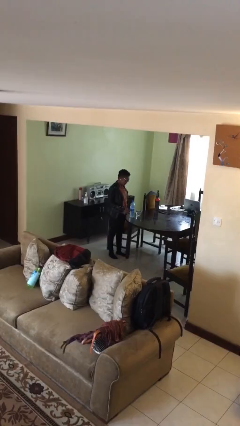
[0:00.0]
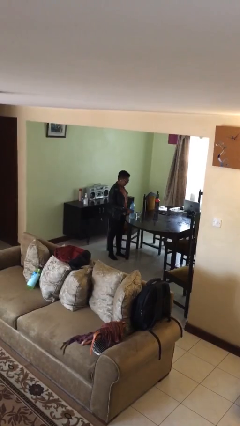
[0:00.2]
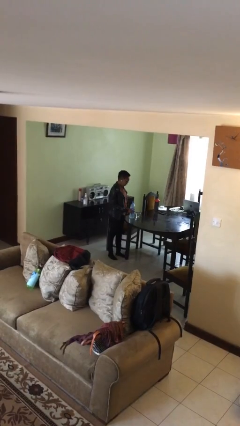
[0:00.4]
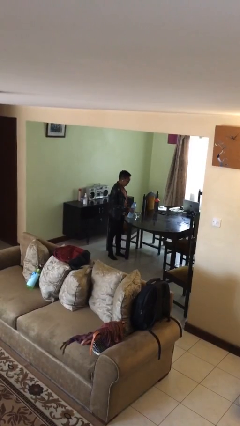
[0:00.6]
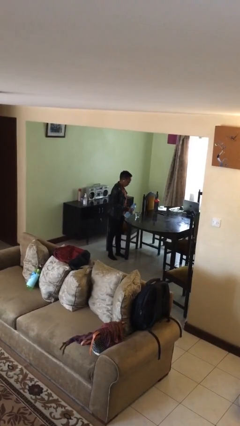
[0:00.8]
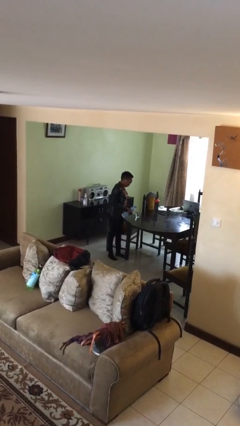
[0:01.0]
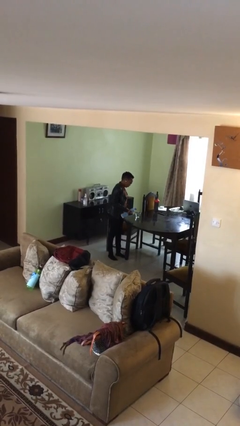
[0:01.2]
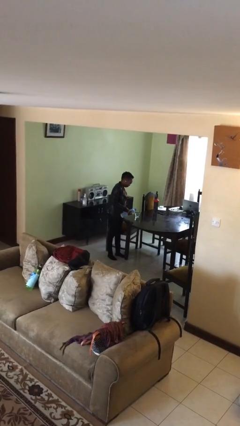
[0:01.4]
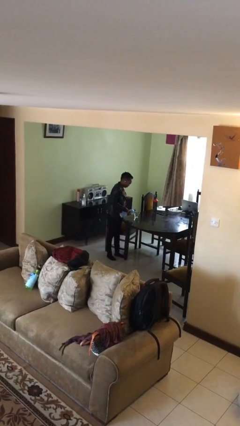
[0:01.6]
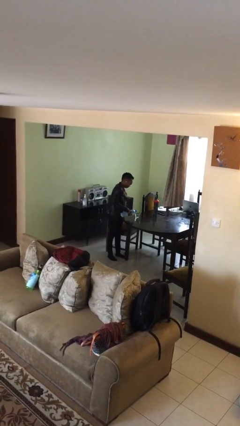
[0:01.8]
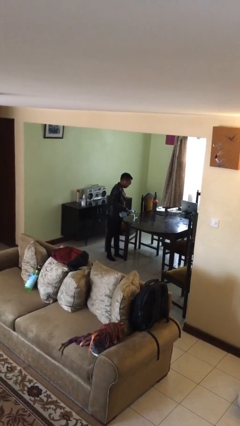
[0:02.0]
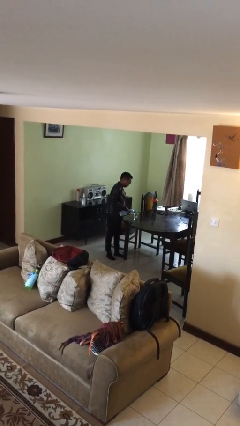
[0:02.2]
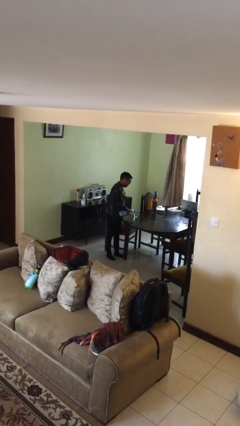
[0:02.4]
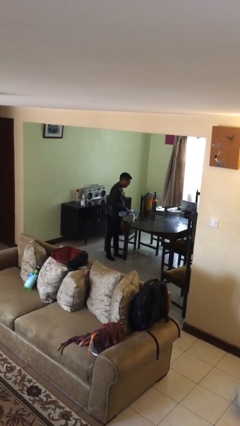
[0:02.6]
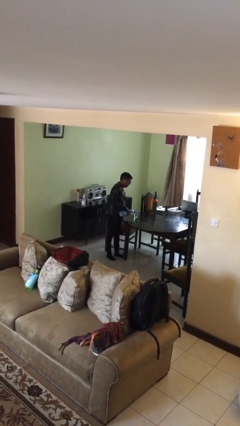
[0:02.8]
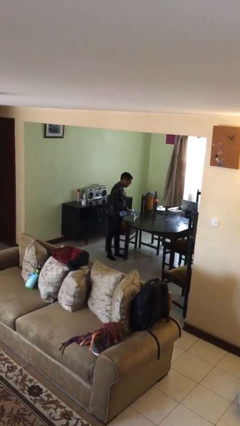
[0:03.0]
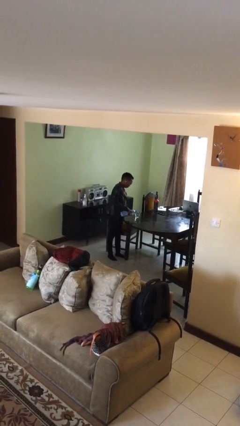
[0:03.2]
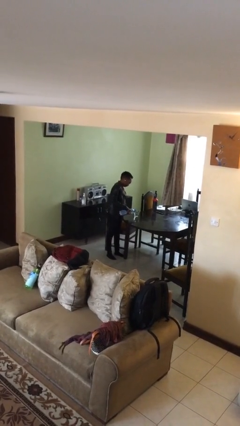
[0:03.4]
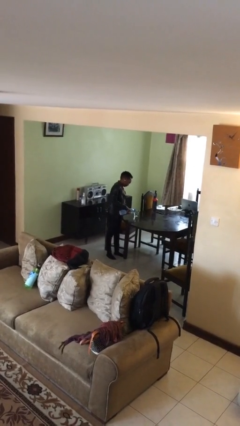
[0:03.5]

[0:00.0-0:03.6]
person pours liquid into cup

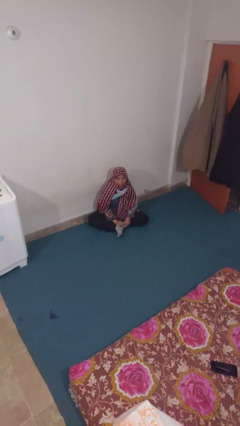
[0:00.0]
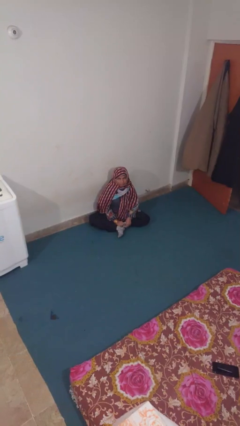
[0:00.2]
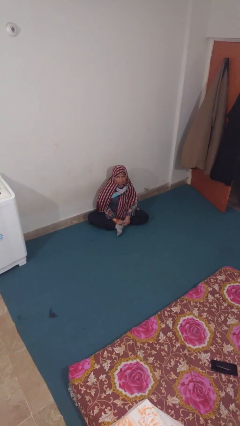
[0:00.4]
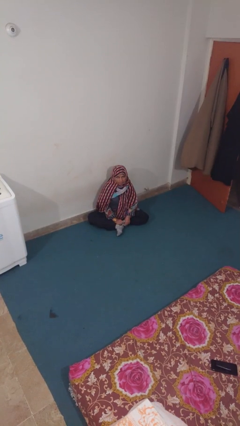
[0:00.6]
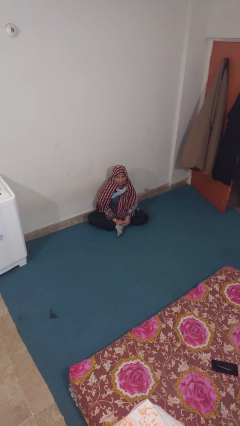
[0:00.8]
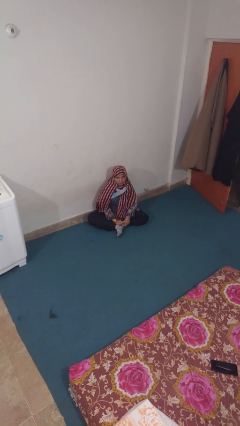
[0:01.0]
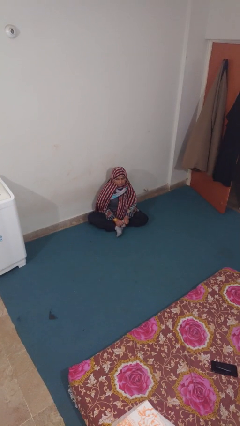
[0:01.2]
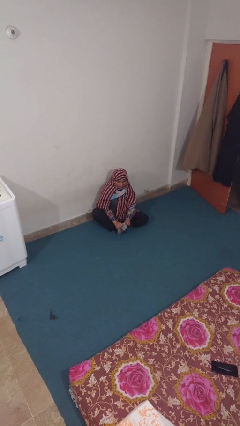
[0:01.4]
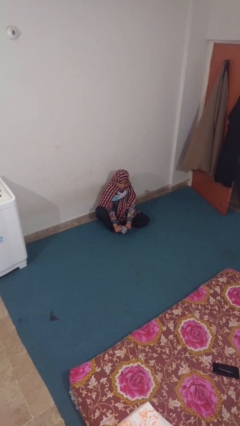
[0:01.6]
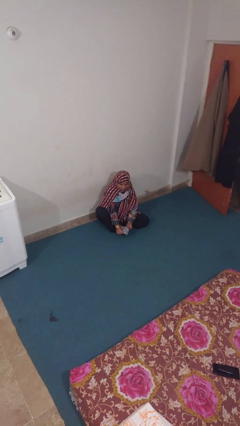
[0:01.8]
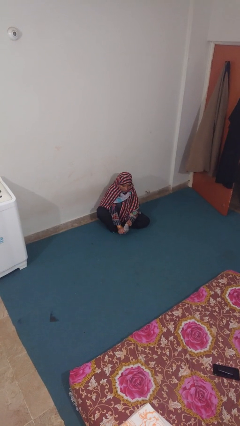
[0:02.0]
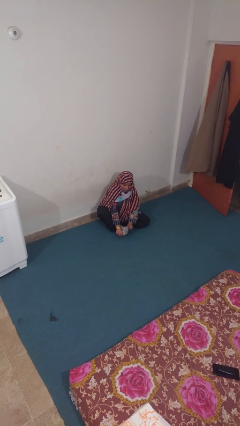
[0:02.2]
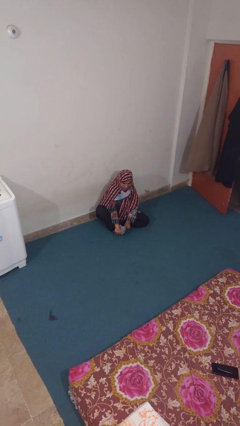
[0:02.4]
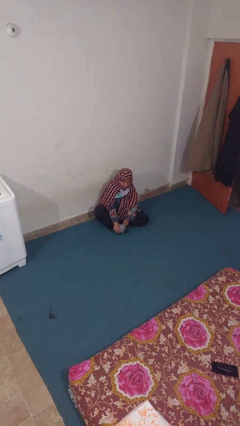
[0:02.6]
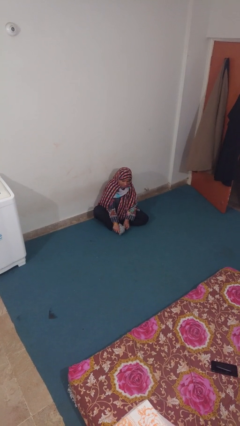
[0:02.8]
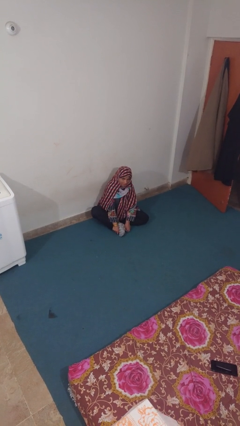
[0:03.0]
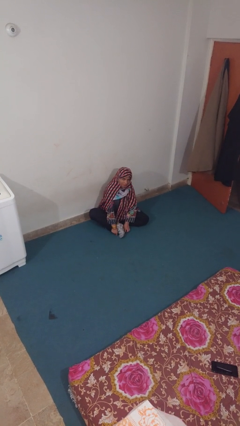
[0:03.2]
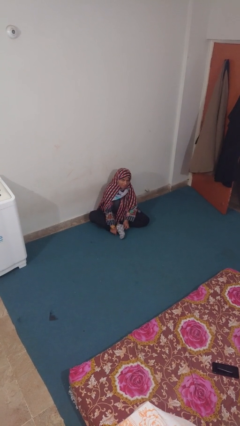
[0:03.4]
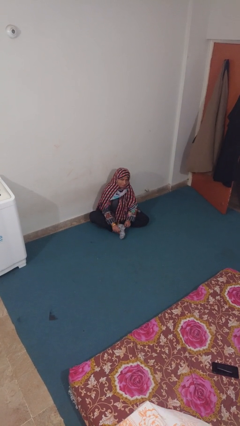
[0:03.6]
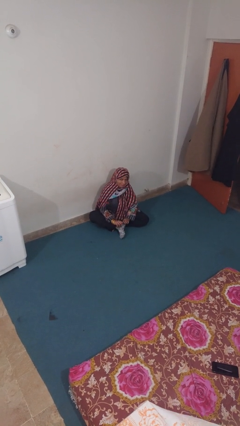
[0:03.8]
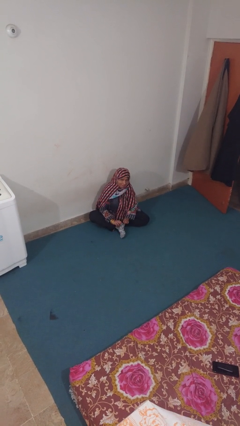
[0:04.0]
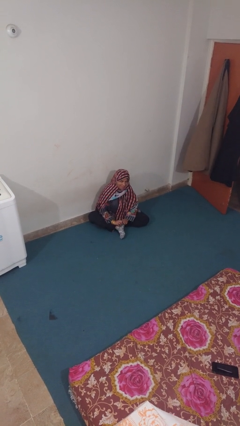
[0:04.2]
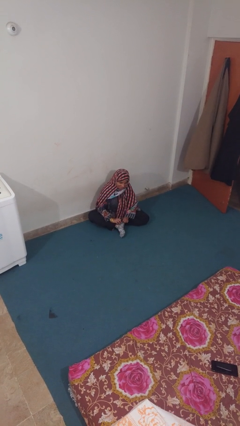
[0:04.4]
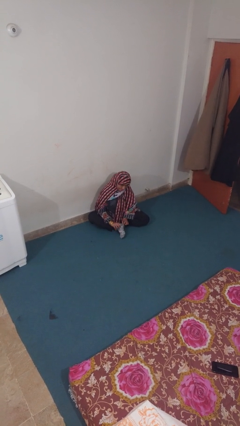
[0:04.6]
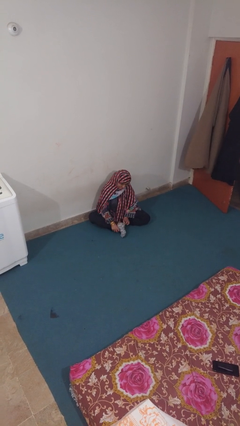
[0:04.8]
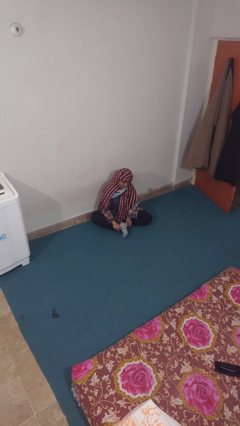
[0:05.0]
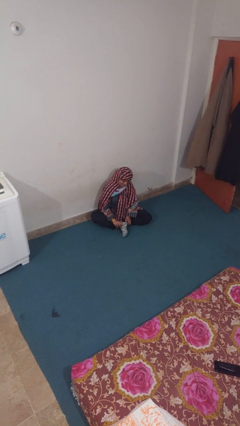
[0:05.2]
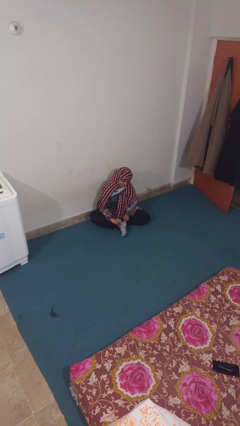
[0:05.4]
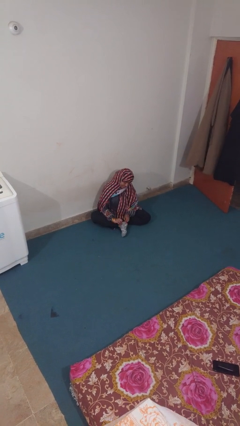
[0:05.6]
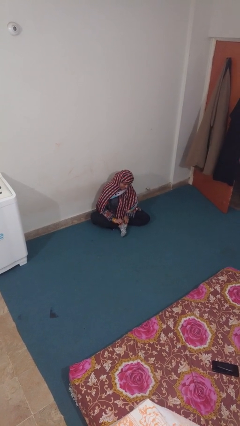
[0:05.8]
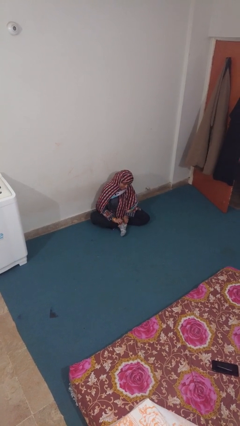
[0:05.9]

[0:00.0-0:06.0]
person puts on socks

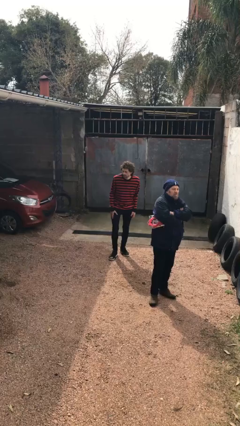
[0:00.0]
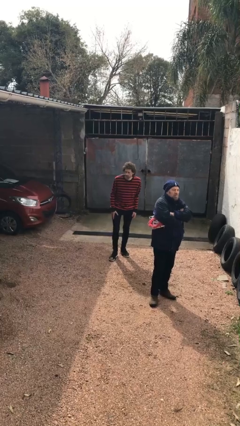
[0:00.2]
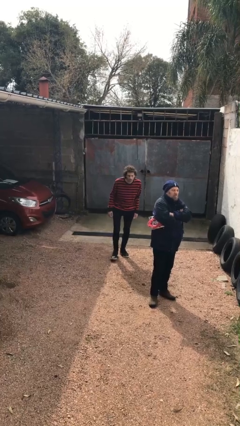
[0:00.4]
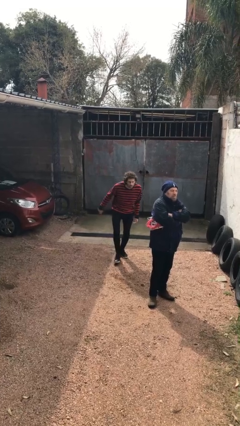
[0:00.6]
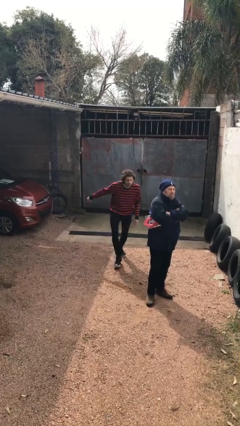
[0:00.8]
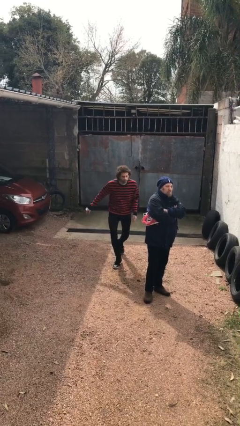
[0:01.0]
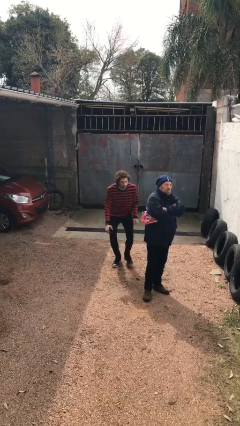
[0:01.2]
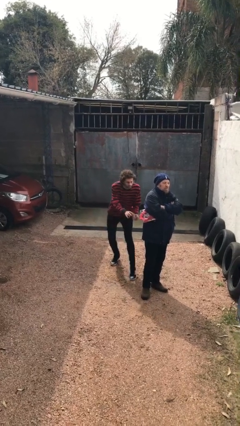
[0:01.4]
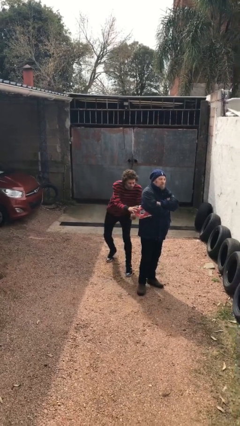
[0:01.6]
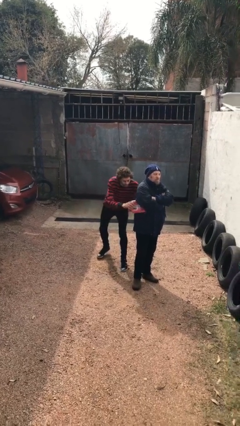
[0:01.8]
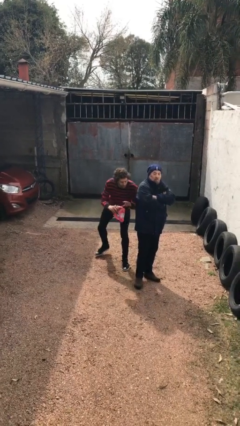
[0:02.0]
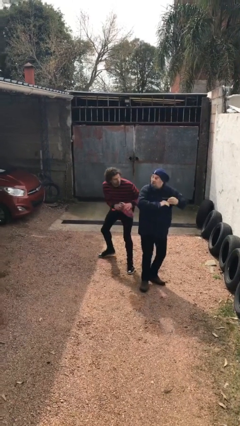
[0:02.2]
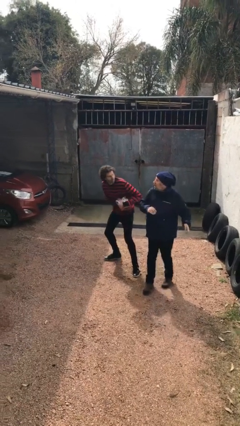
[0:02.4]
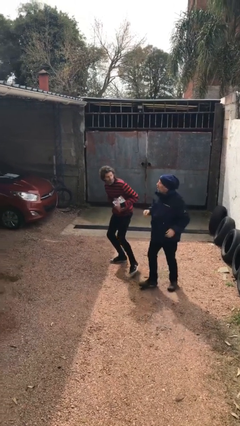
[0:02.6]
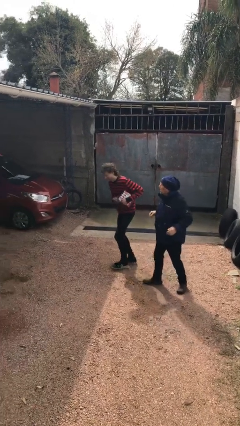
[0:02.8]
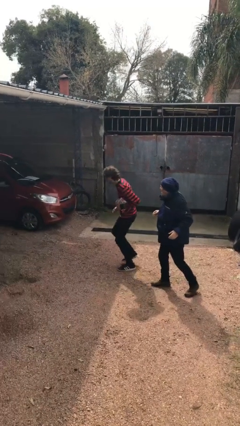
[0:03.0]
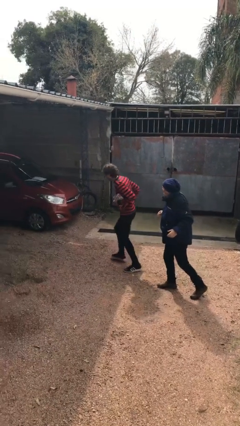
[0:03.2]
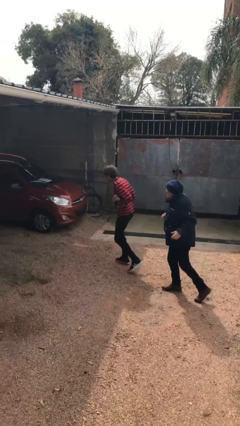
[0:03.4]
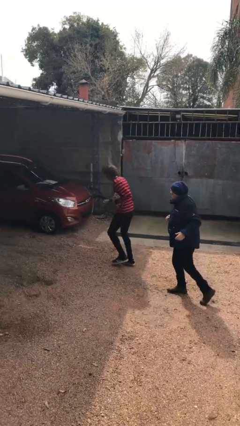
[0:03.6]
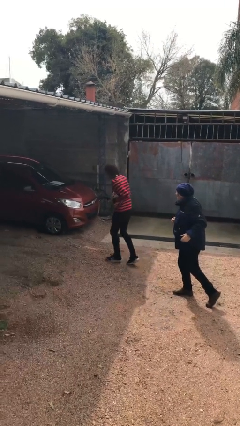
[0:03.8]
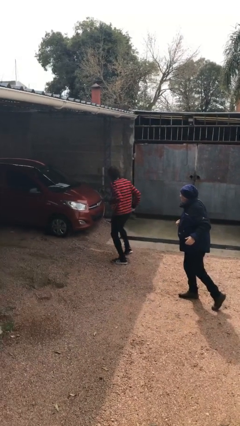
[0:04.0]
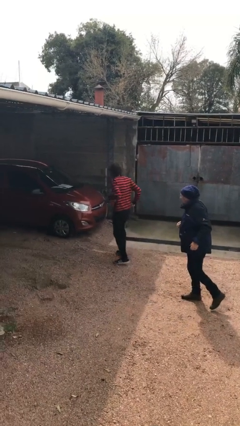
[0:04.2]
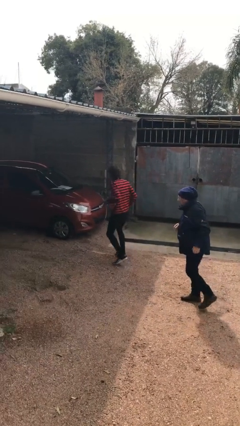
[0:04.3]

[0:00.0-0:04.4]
person steals object from person

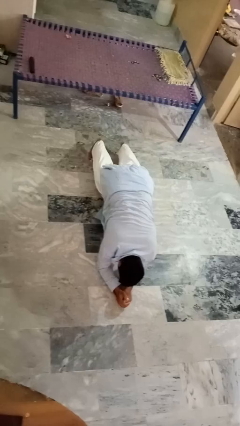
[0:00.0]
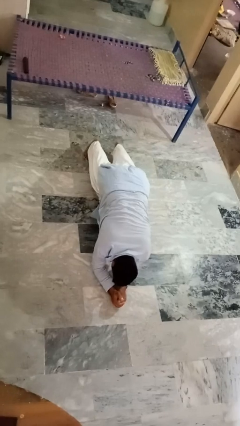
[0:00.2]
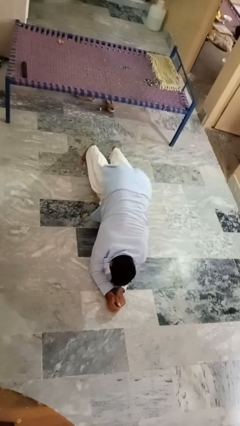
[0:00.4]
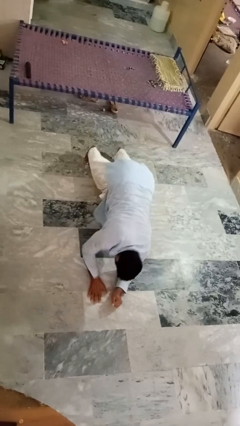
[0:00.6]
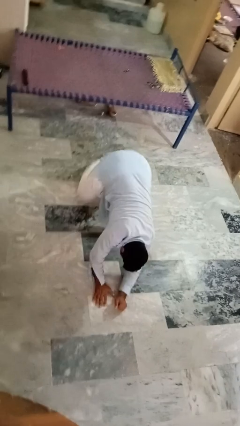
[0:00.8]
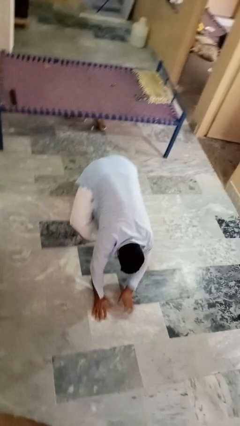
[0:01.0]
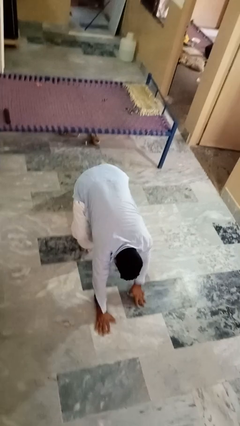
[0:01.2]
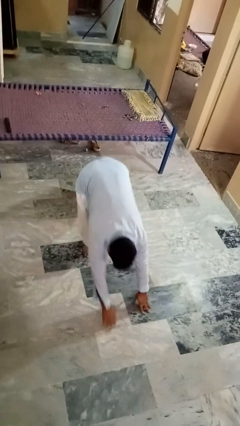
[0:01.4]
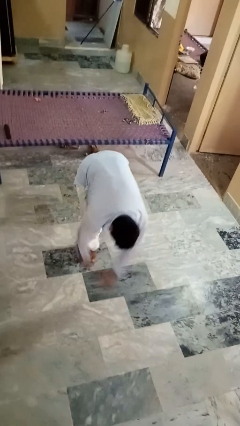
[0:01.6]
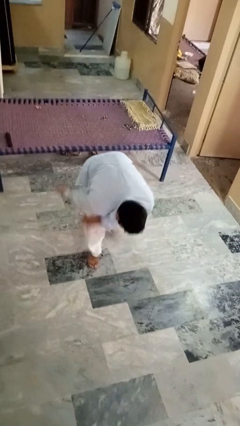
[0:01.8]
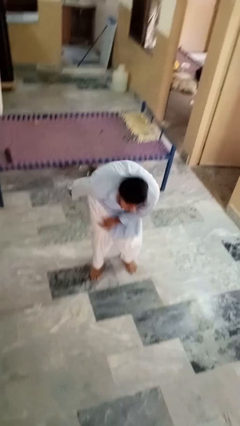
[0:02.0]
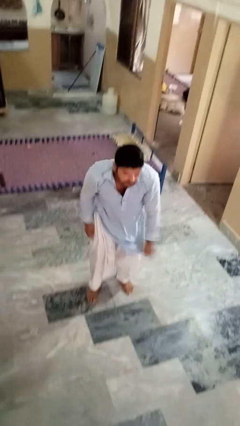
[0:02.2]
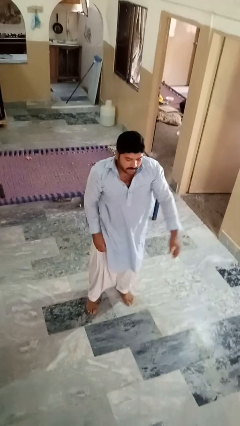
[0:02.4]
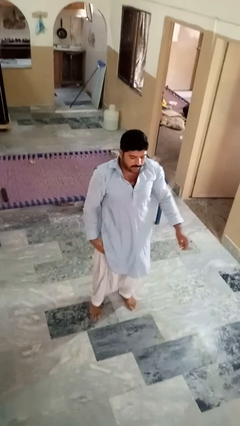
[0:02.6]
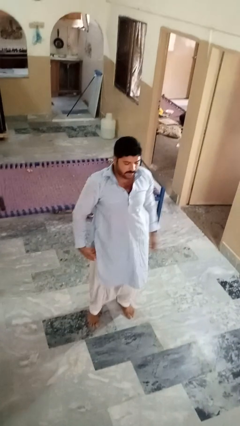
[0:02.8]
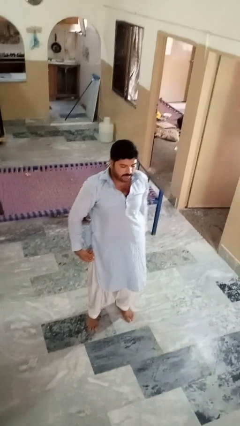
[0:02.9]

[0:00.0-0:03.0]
person stands up from floor

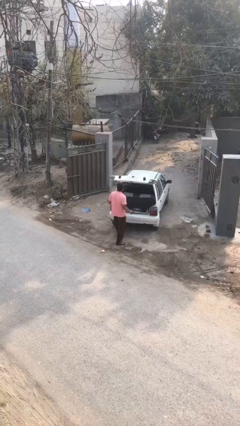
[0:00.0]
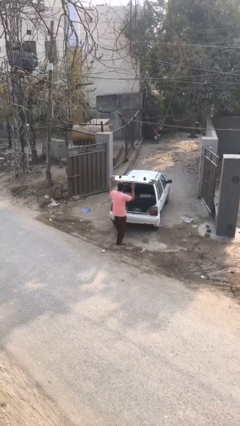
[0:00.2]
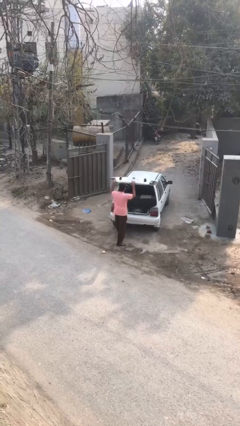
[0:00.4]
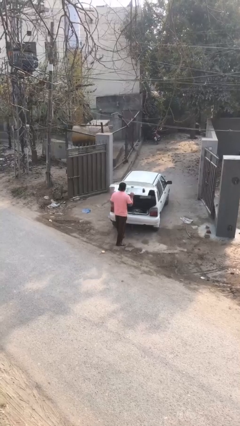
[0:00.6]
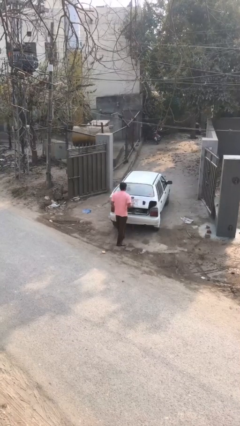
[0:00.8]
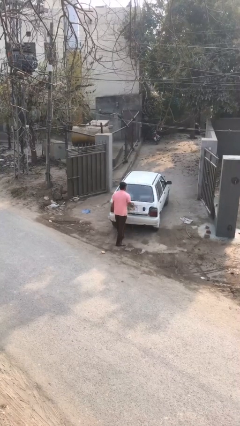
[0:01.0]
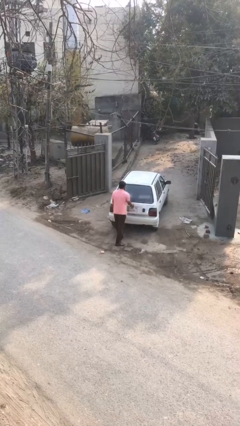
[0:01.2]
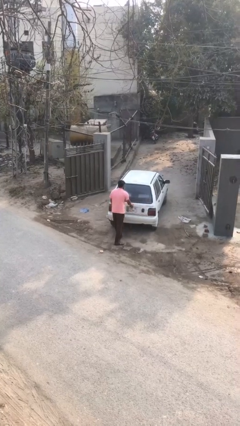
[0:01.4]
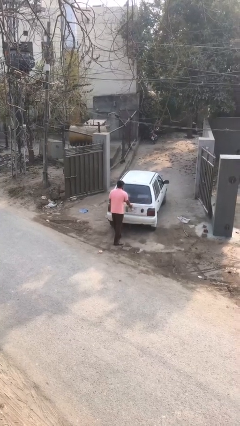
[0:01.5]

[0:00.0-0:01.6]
person closes car trunk
